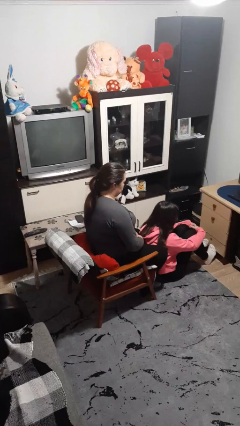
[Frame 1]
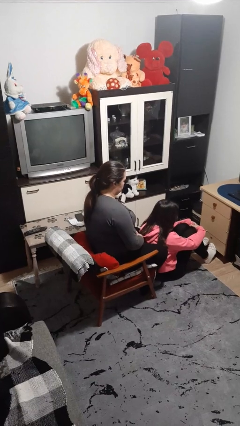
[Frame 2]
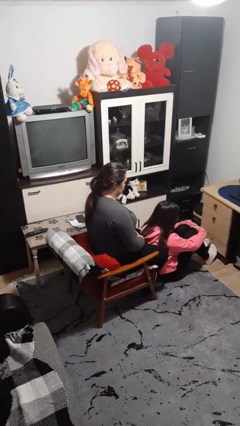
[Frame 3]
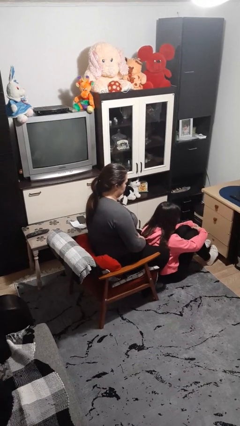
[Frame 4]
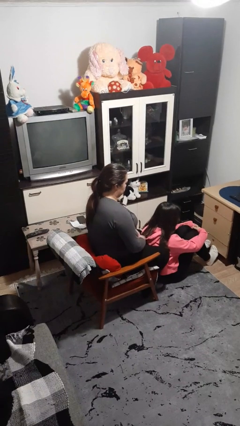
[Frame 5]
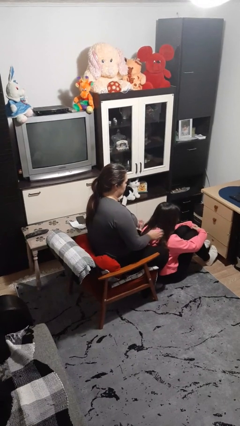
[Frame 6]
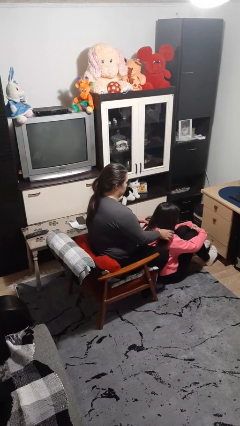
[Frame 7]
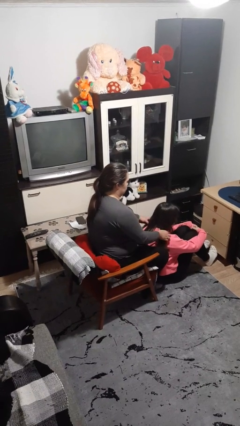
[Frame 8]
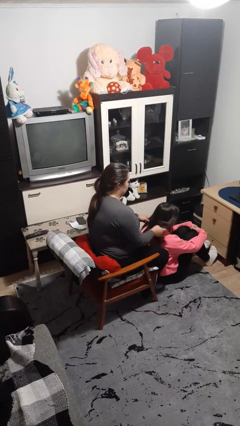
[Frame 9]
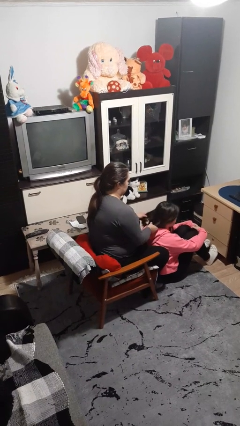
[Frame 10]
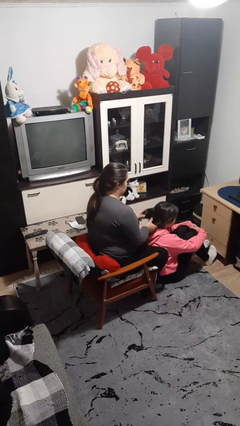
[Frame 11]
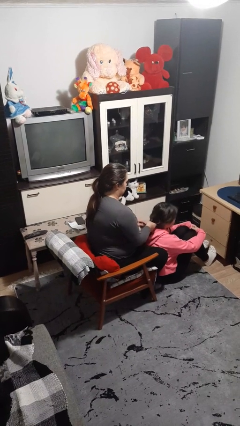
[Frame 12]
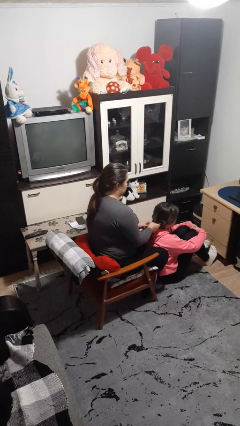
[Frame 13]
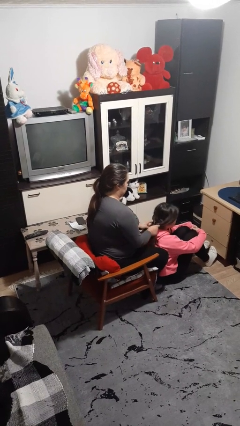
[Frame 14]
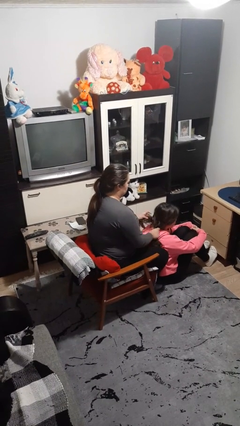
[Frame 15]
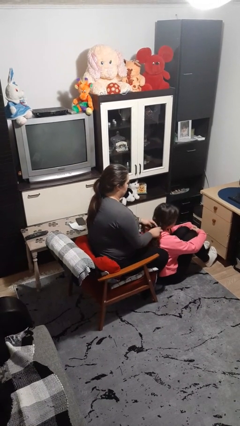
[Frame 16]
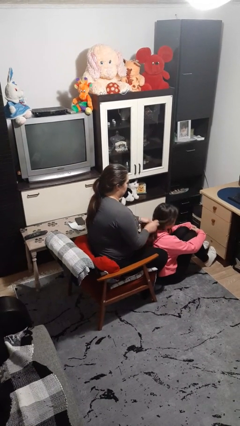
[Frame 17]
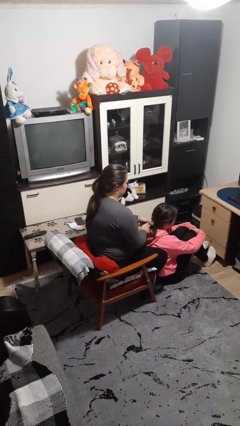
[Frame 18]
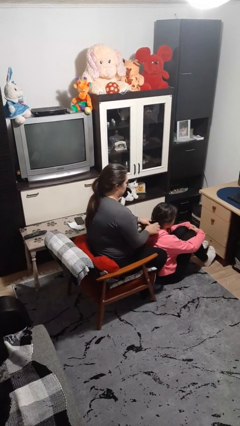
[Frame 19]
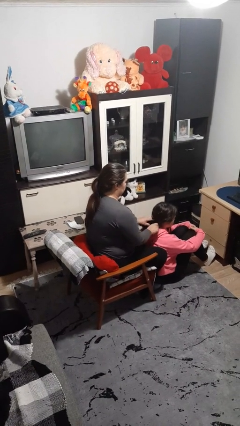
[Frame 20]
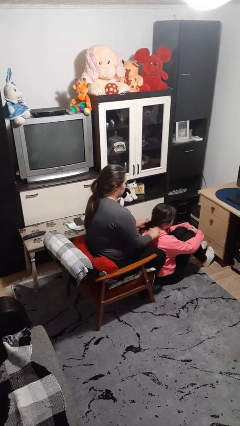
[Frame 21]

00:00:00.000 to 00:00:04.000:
person braids hair of person

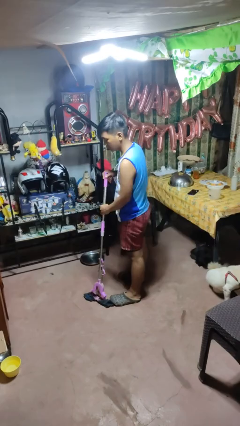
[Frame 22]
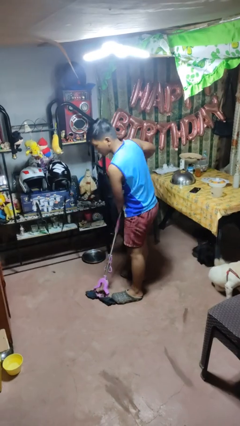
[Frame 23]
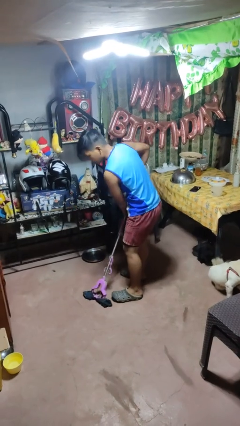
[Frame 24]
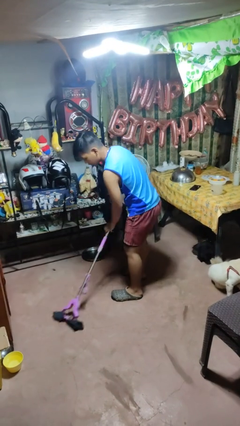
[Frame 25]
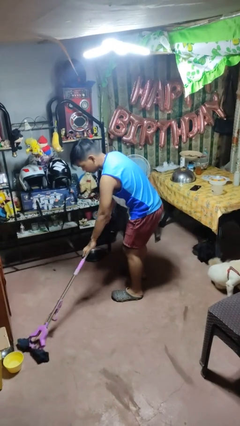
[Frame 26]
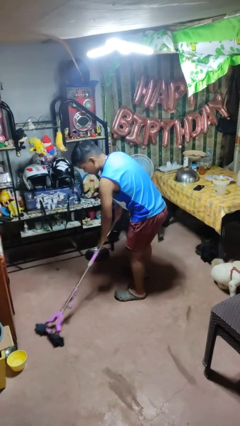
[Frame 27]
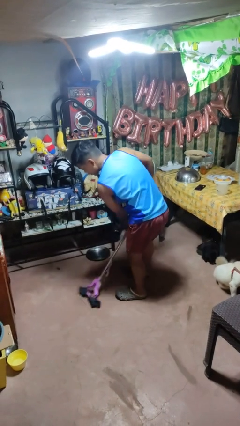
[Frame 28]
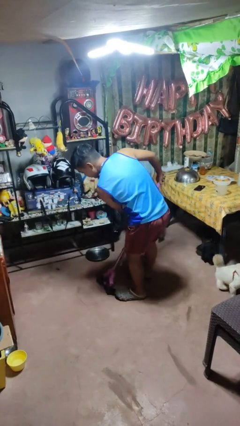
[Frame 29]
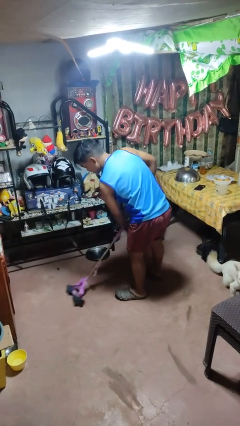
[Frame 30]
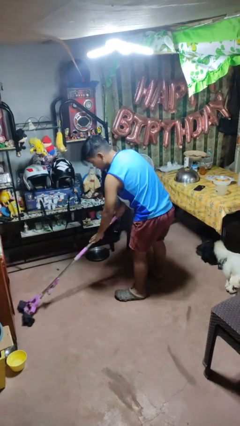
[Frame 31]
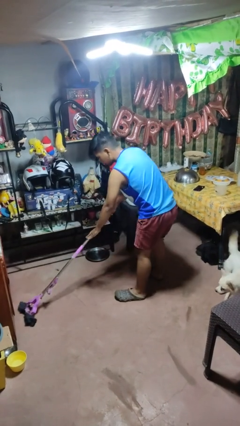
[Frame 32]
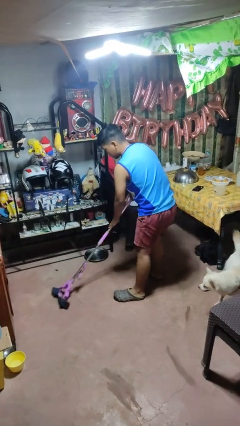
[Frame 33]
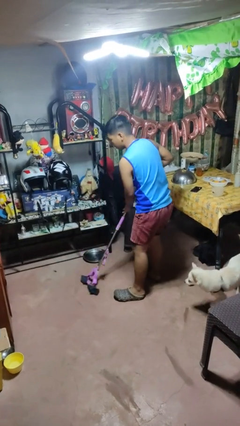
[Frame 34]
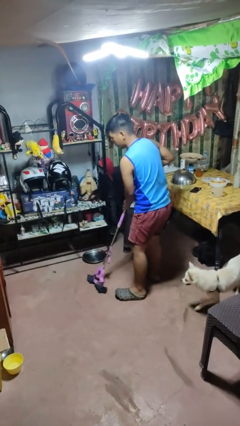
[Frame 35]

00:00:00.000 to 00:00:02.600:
person mops

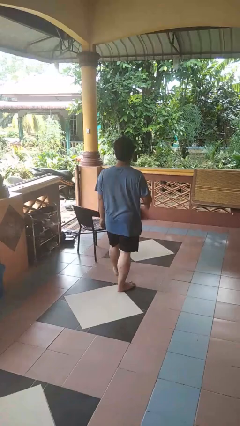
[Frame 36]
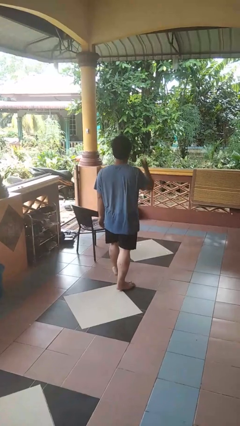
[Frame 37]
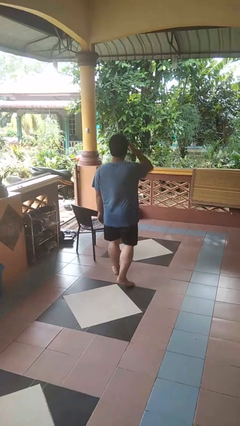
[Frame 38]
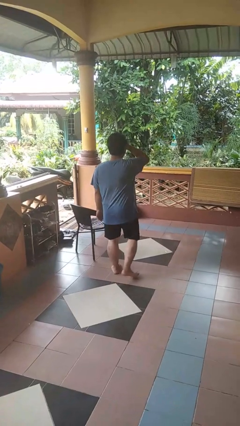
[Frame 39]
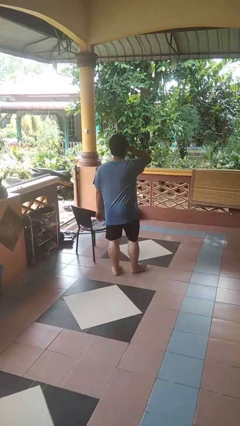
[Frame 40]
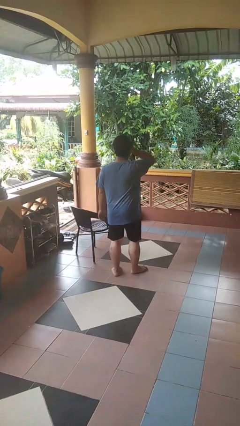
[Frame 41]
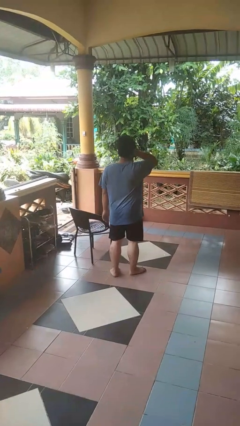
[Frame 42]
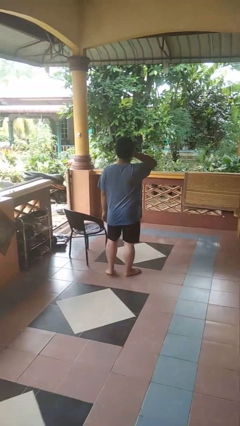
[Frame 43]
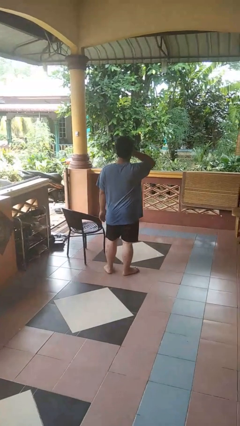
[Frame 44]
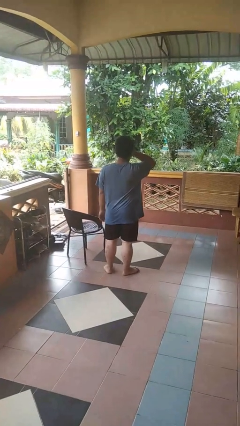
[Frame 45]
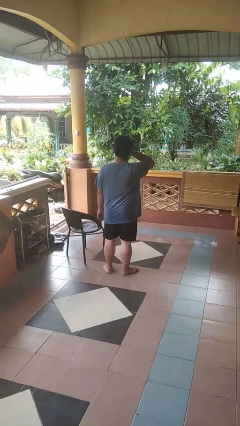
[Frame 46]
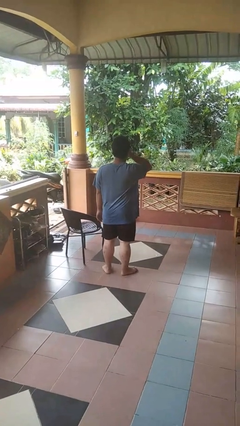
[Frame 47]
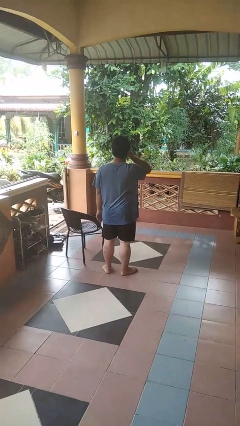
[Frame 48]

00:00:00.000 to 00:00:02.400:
person rubs eyes

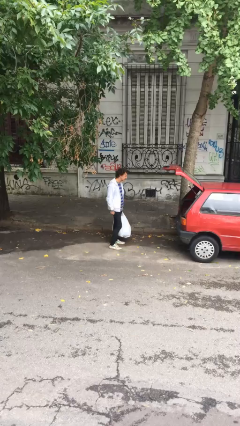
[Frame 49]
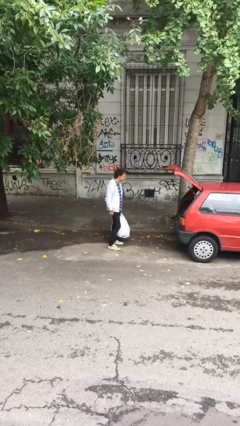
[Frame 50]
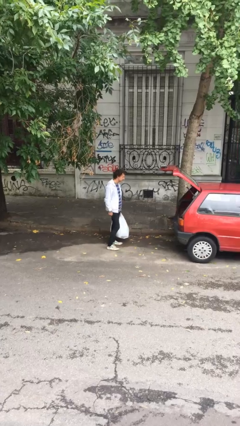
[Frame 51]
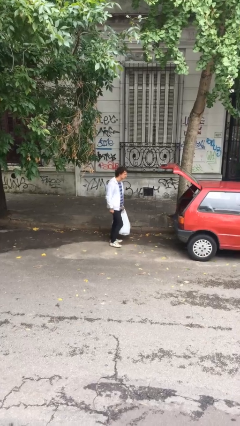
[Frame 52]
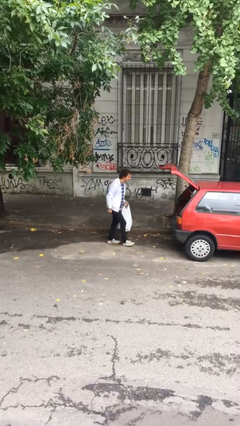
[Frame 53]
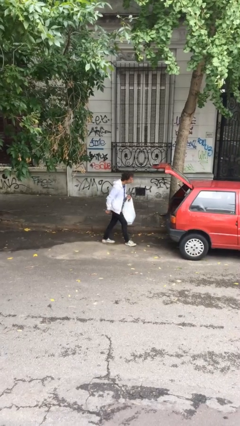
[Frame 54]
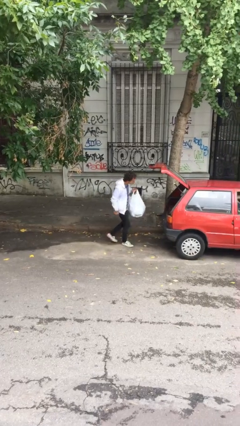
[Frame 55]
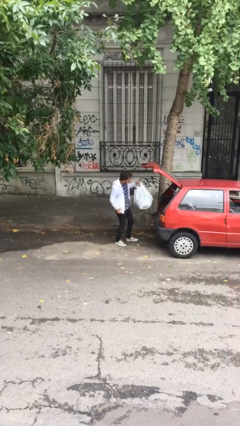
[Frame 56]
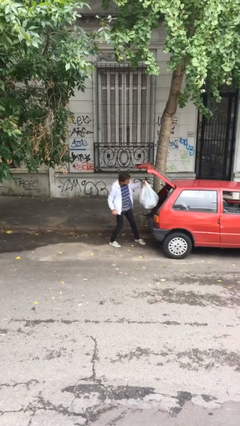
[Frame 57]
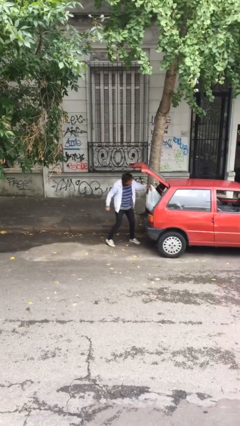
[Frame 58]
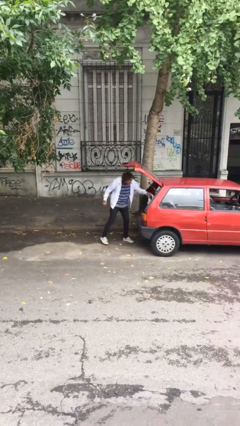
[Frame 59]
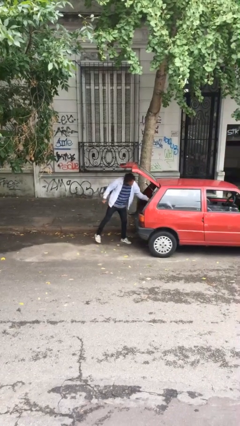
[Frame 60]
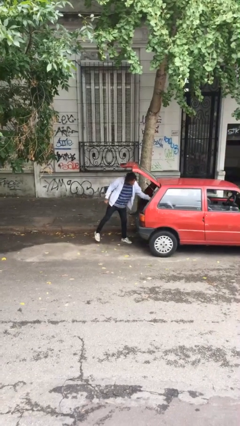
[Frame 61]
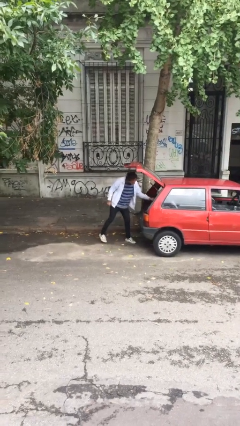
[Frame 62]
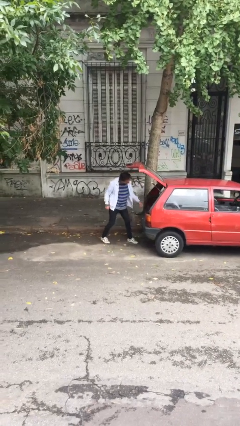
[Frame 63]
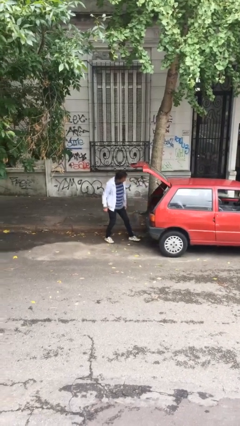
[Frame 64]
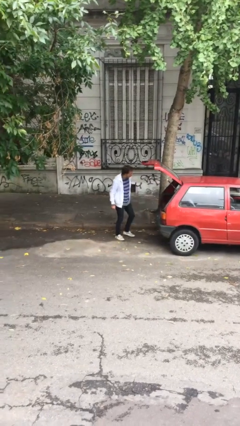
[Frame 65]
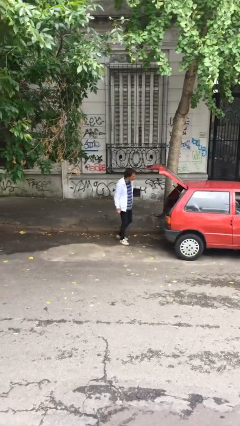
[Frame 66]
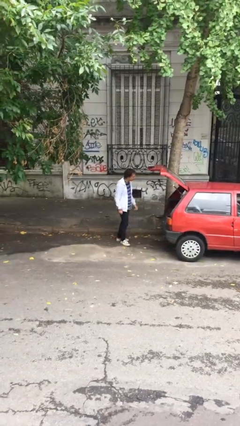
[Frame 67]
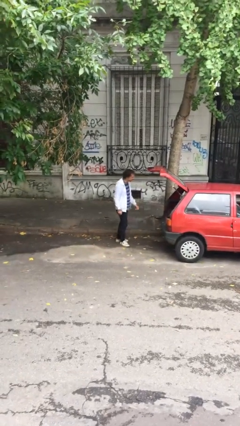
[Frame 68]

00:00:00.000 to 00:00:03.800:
person loads car

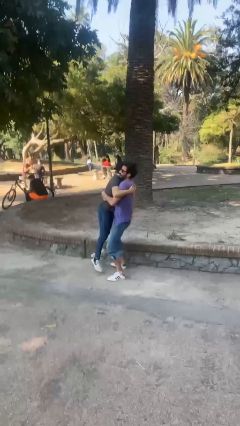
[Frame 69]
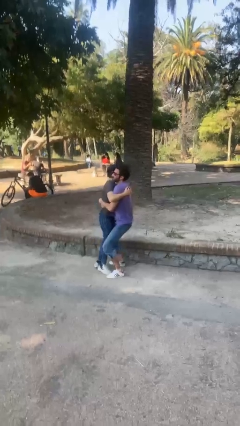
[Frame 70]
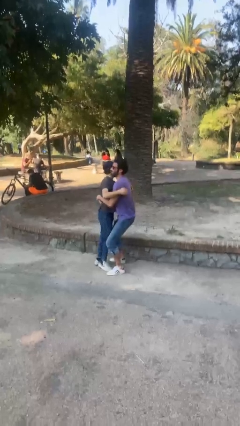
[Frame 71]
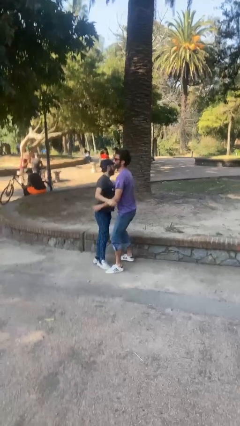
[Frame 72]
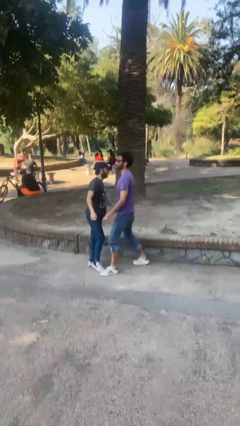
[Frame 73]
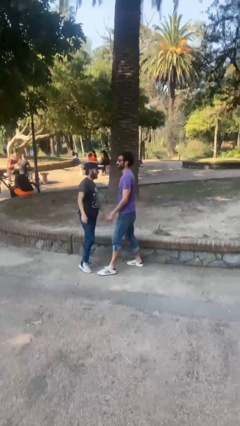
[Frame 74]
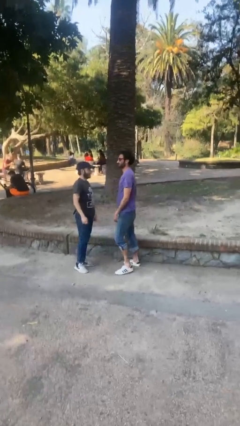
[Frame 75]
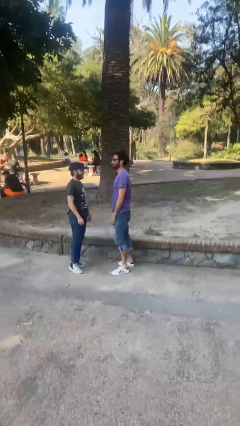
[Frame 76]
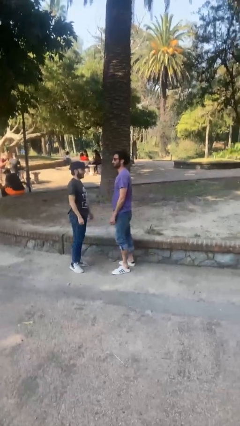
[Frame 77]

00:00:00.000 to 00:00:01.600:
person puts down person

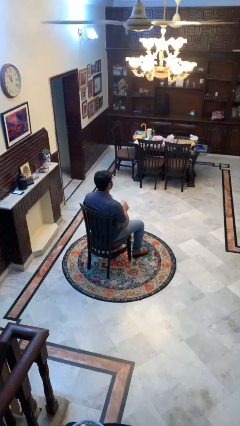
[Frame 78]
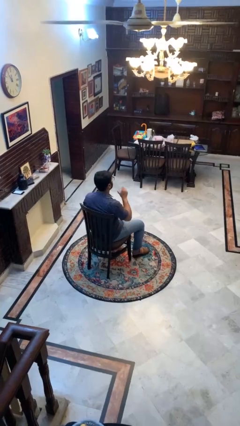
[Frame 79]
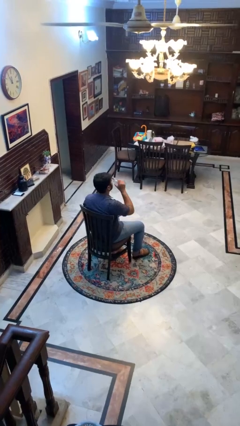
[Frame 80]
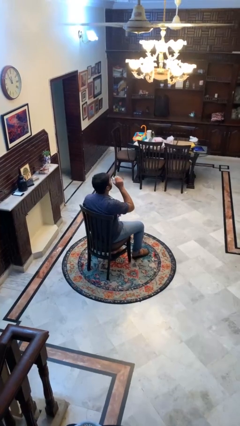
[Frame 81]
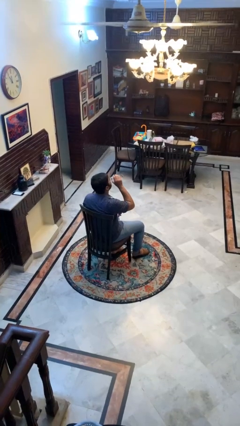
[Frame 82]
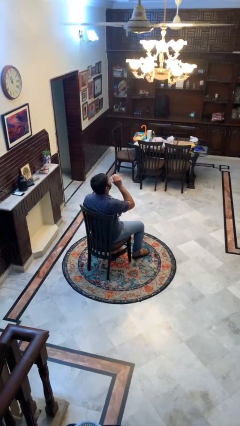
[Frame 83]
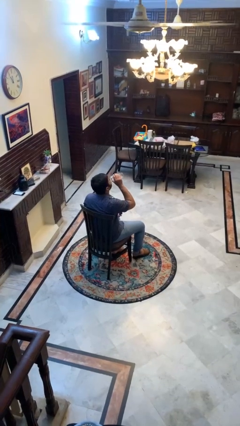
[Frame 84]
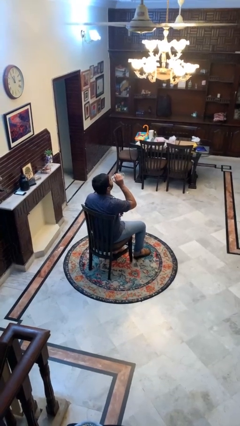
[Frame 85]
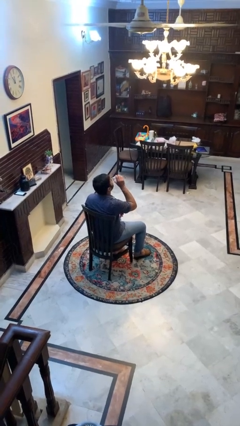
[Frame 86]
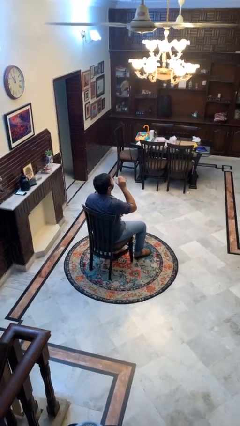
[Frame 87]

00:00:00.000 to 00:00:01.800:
person drinks from bottle

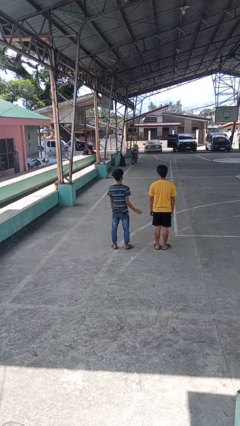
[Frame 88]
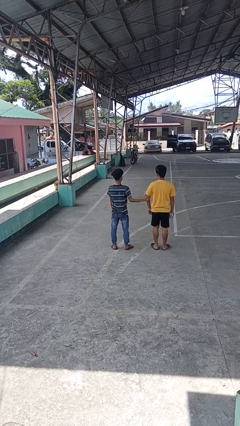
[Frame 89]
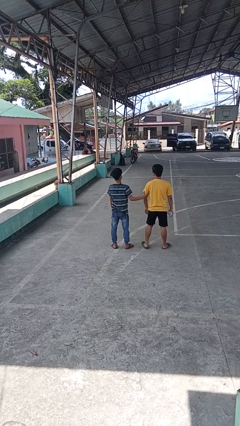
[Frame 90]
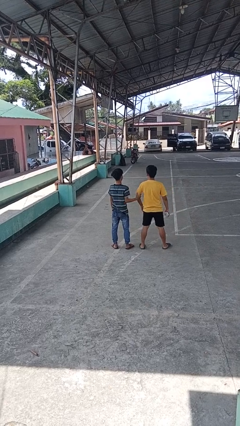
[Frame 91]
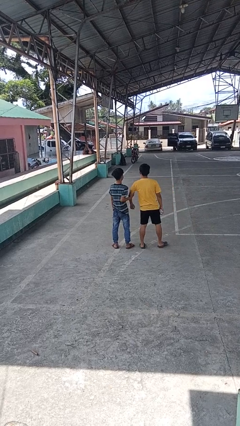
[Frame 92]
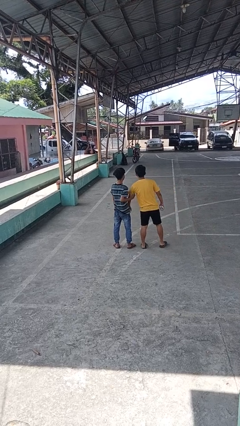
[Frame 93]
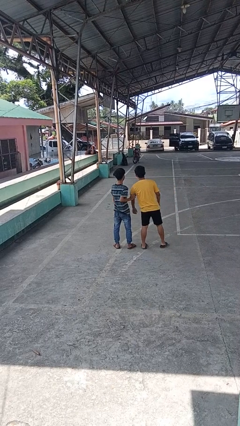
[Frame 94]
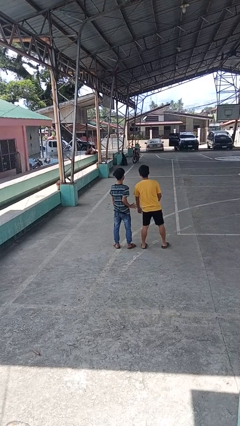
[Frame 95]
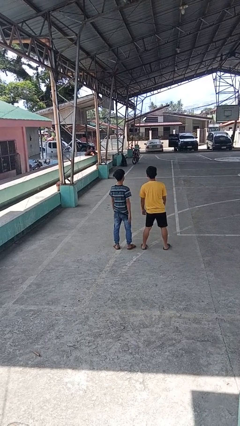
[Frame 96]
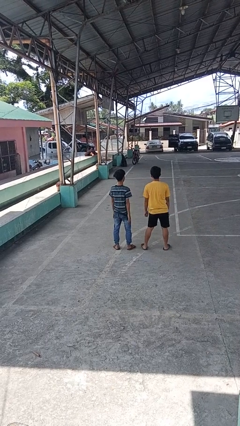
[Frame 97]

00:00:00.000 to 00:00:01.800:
person grabs person by bicep
